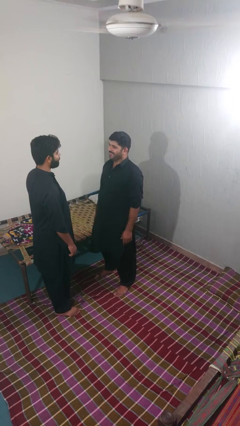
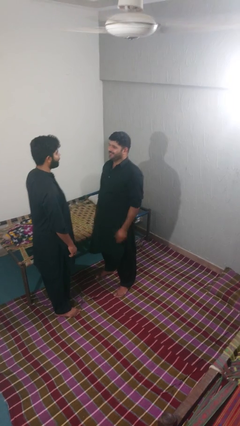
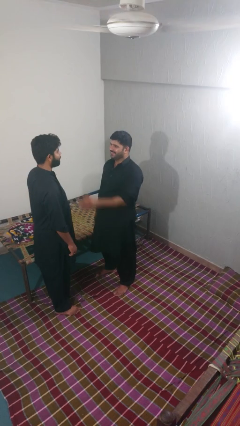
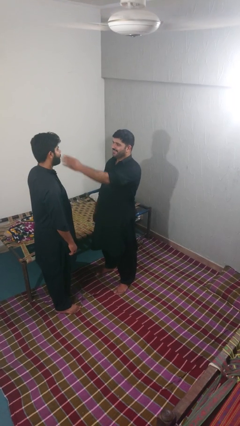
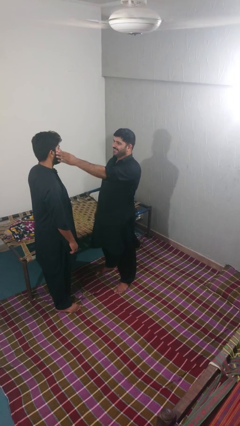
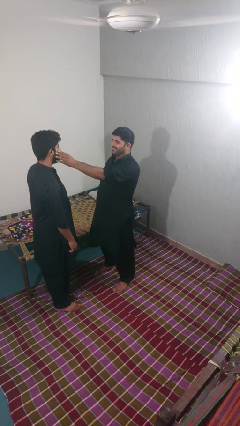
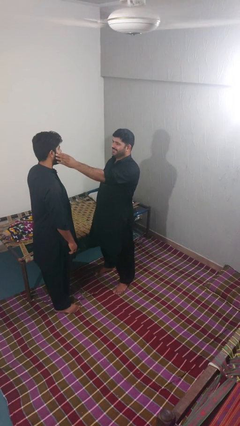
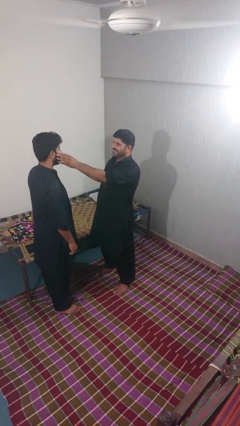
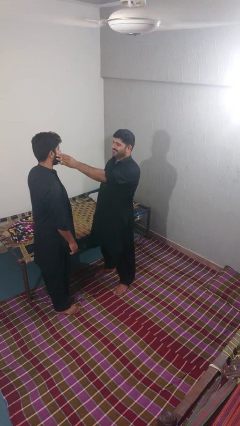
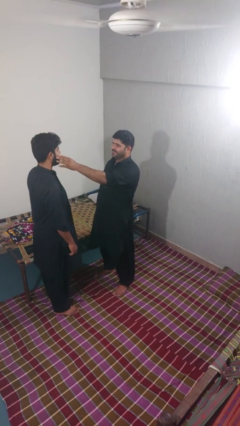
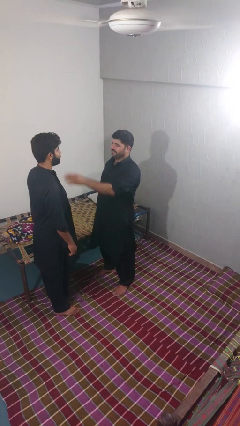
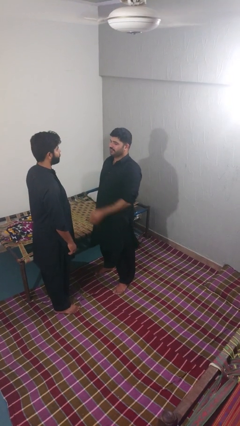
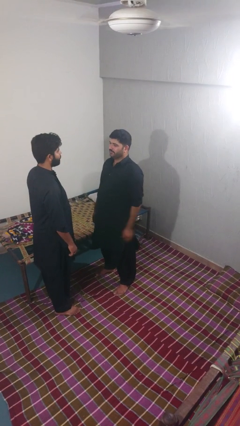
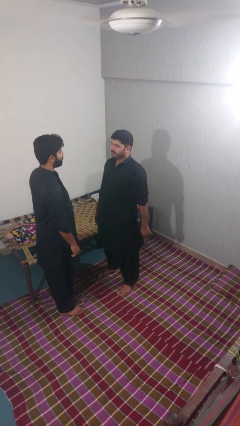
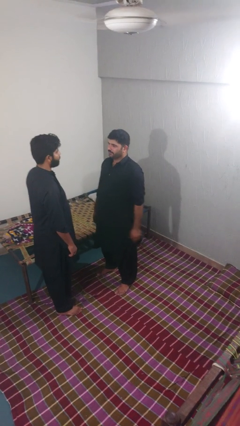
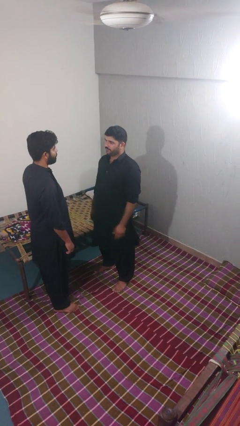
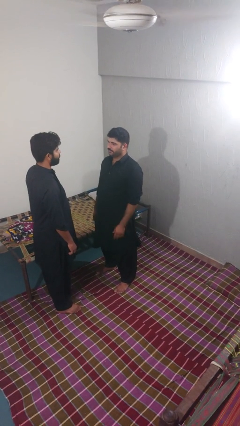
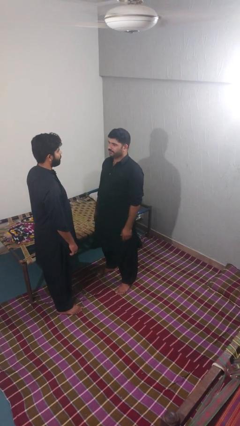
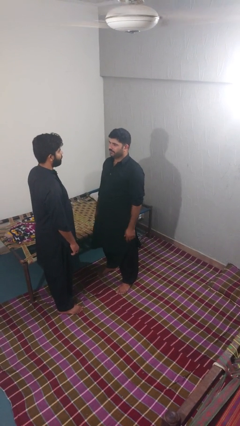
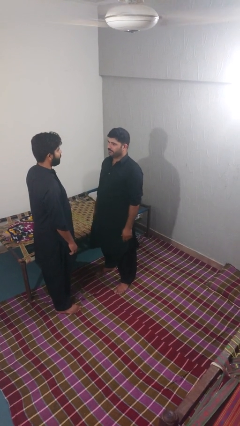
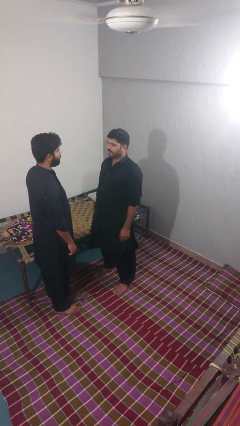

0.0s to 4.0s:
person touches face of person

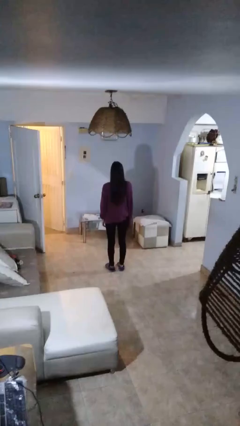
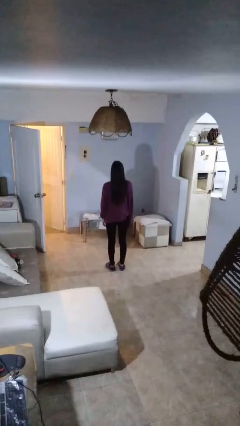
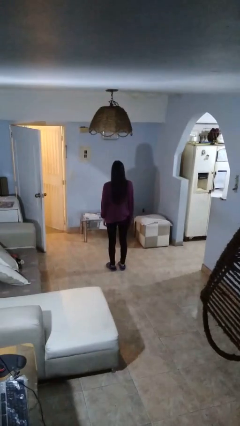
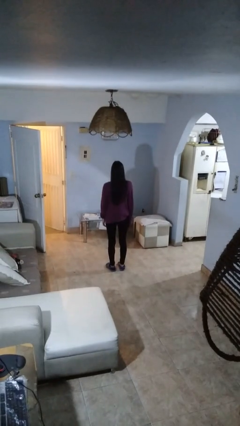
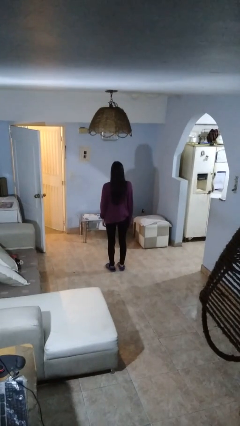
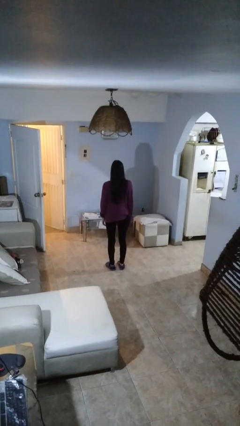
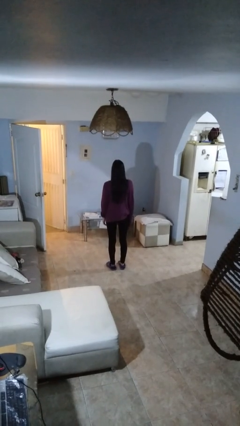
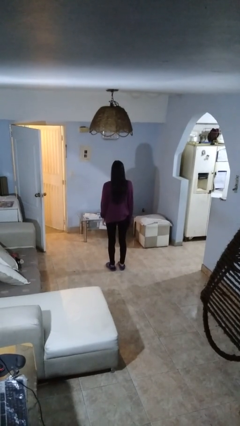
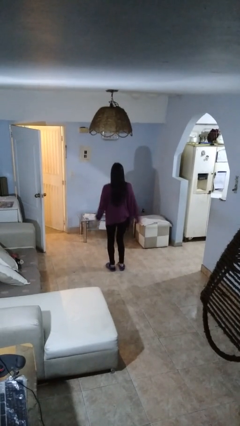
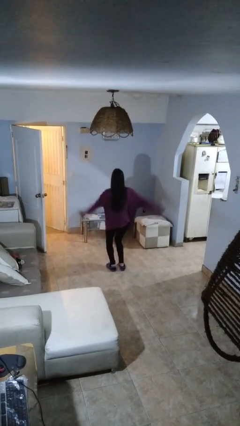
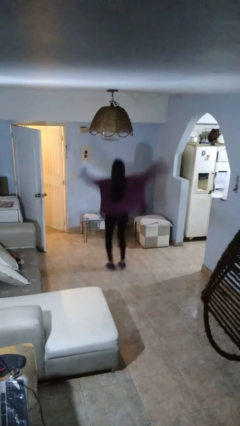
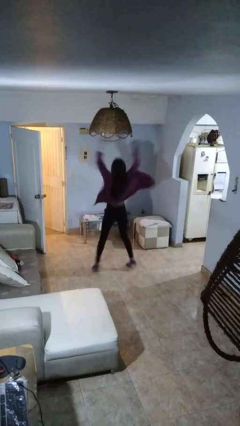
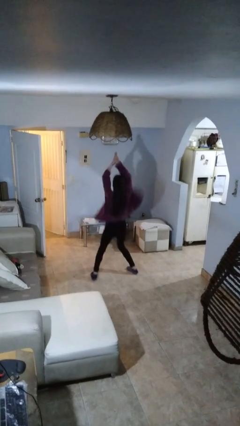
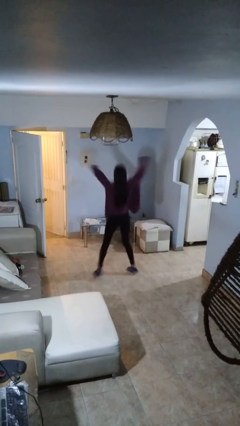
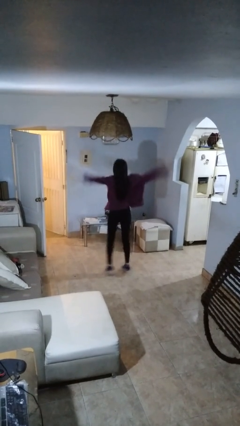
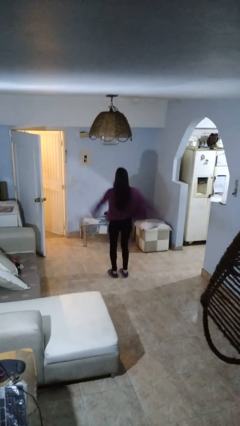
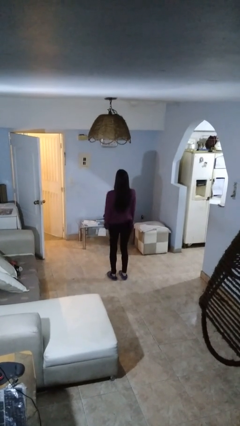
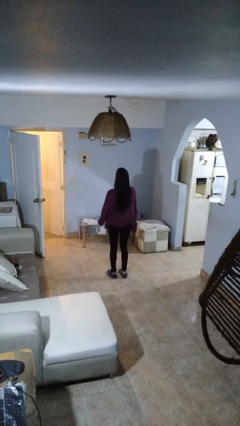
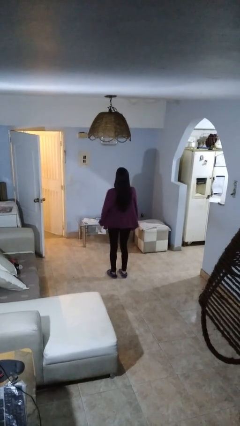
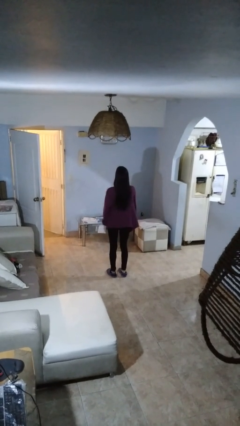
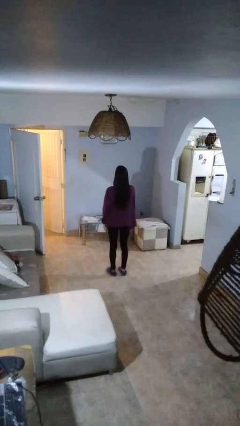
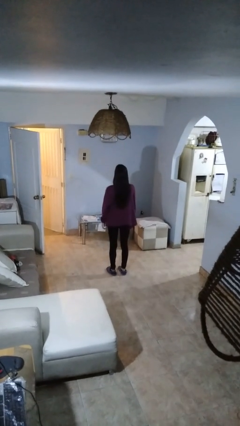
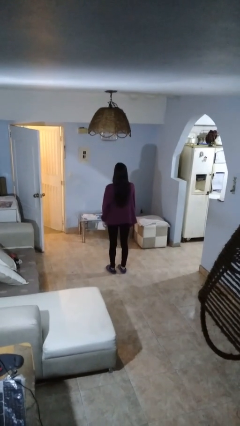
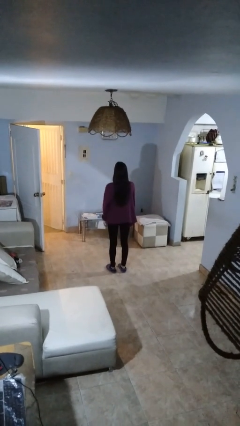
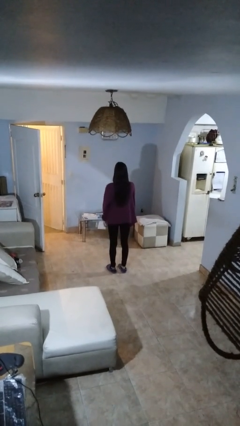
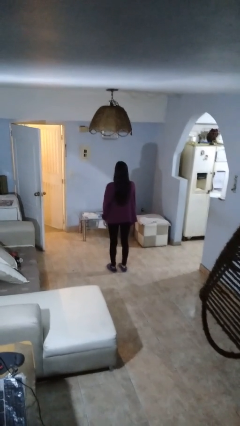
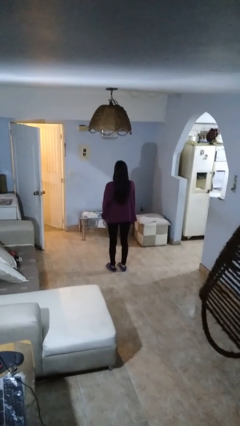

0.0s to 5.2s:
person exercises with jumping jacks

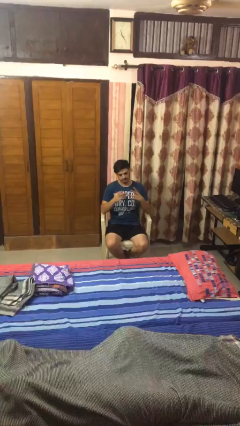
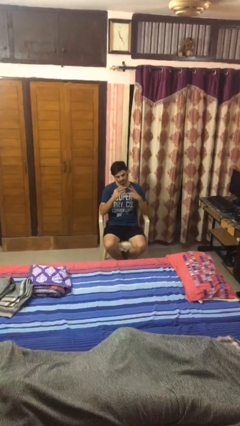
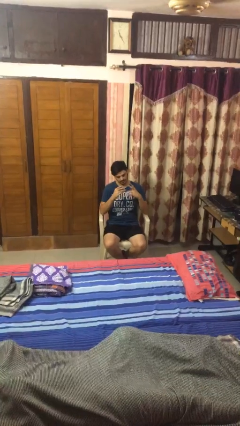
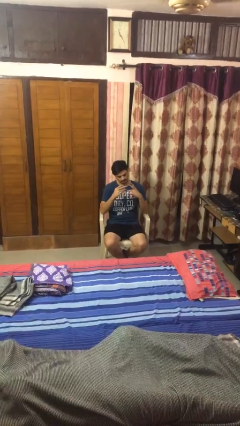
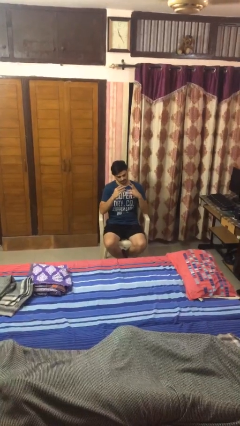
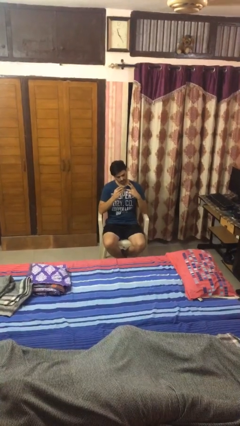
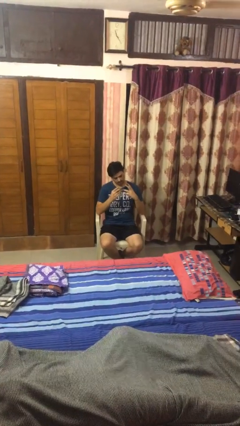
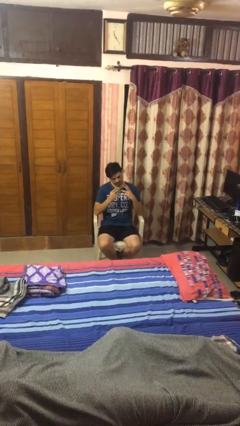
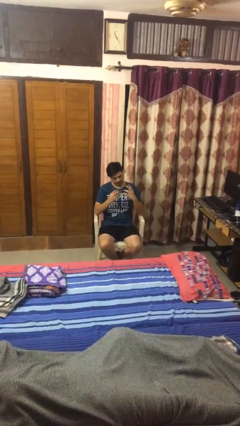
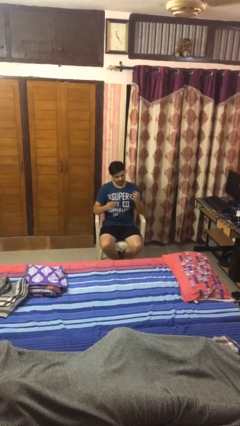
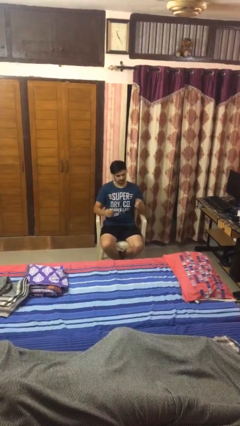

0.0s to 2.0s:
person clips fingernails

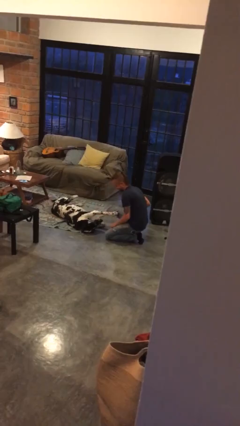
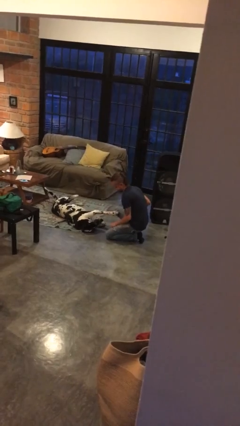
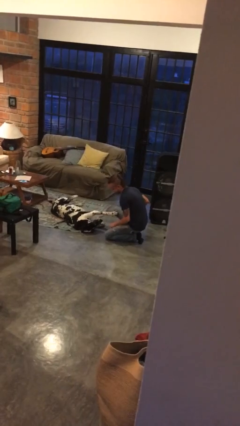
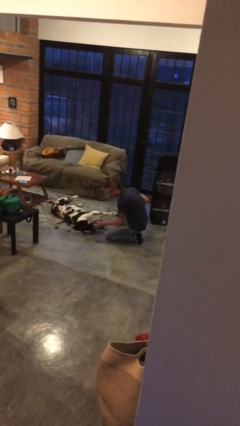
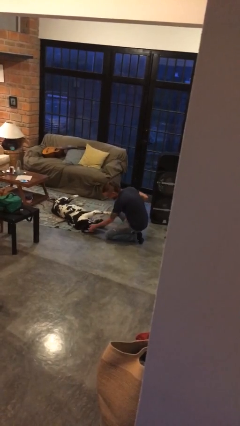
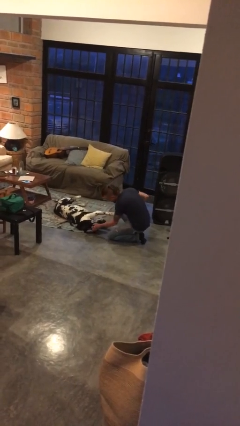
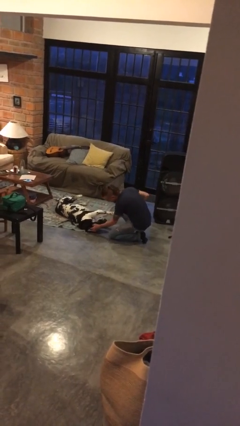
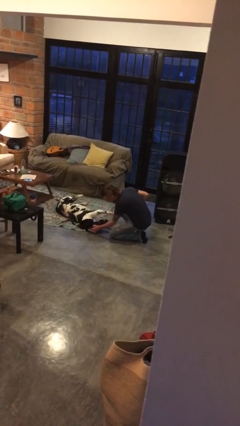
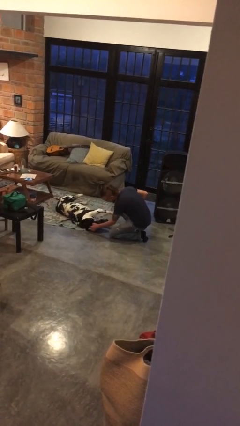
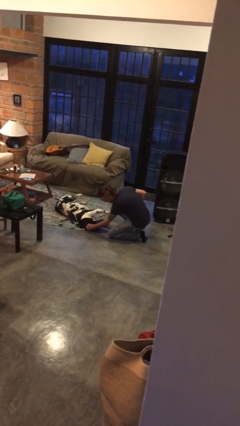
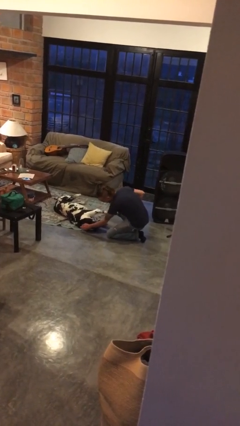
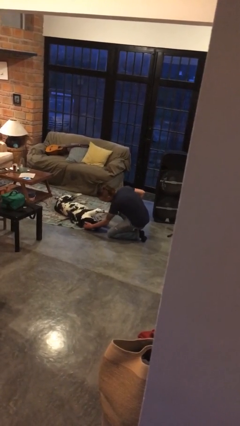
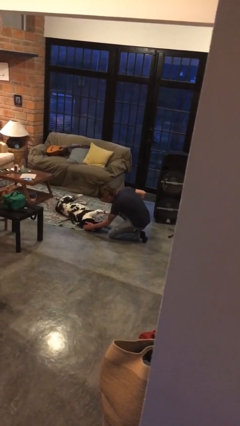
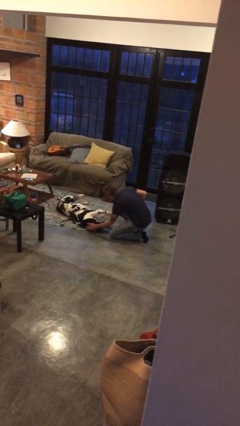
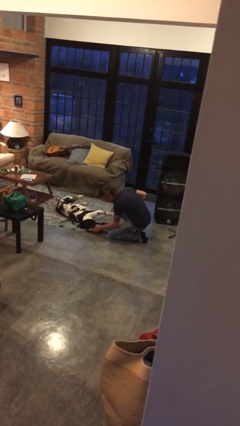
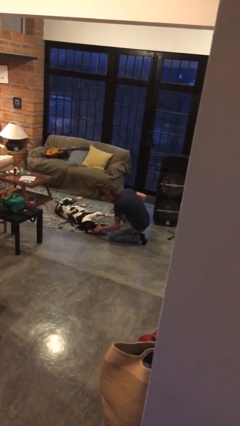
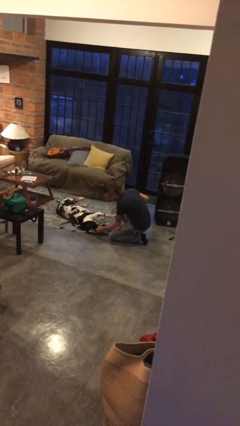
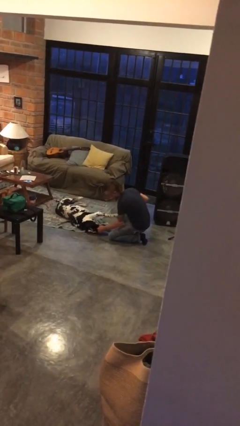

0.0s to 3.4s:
person pets dog

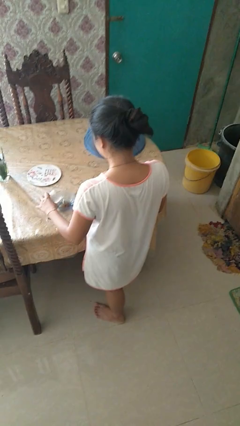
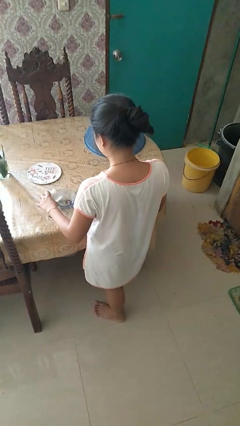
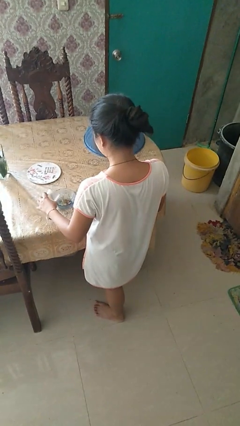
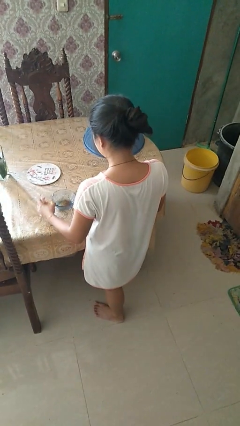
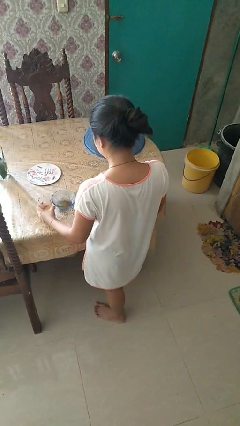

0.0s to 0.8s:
person pours into bowl

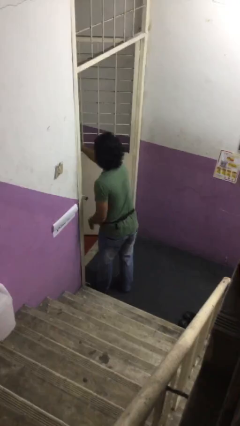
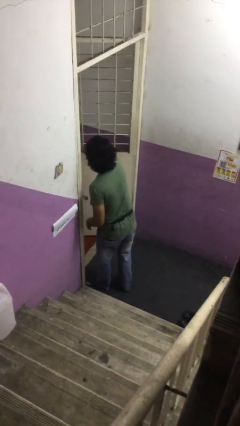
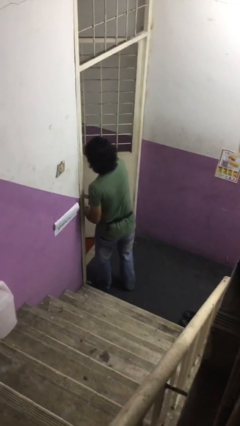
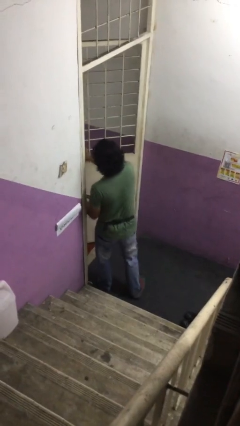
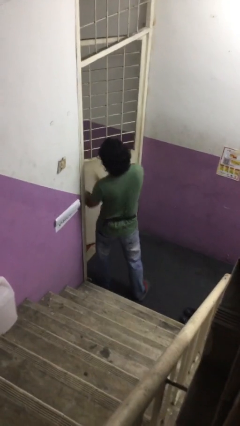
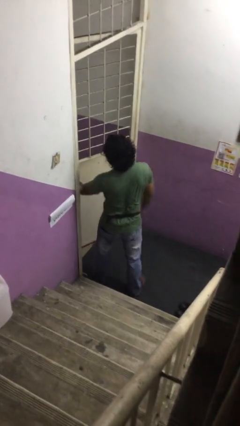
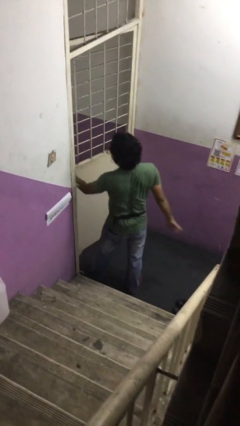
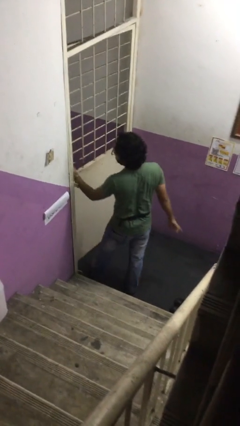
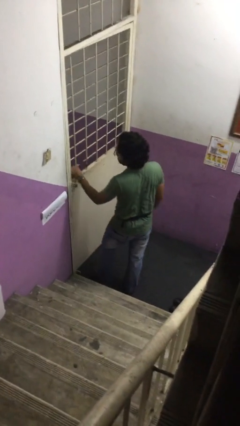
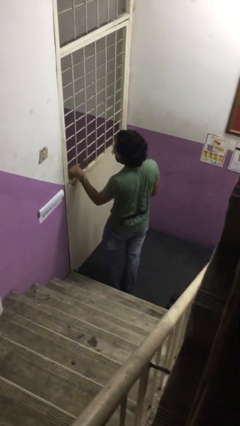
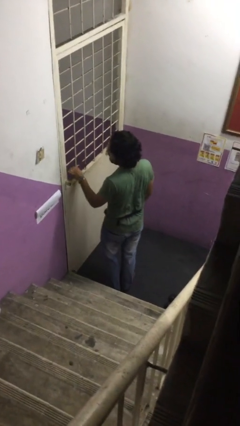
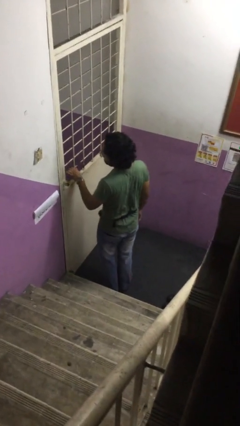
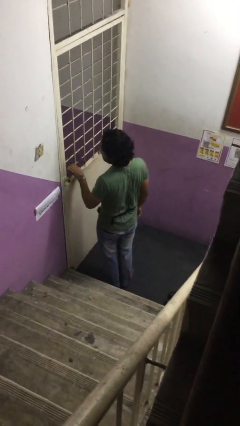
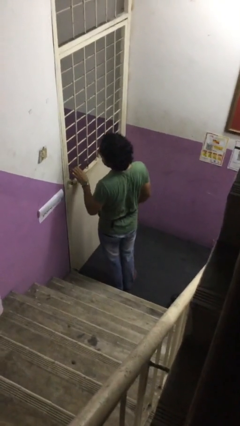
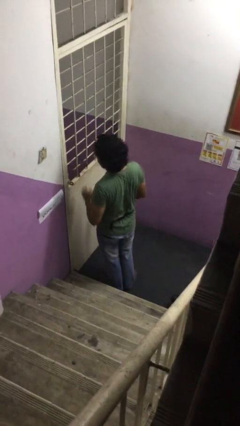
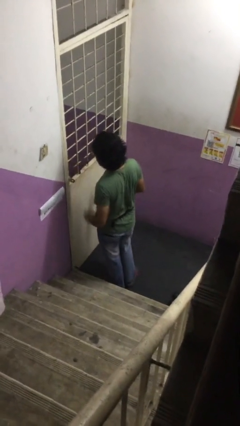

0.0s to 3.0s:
person closes facility door
